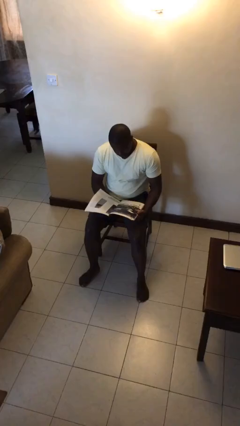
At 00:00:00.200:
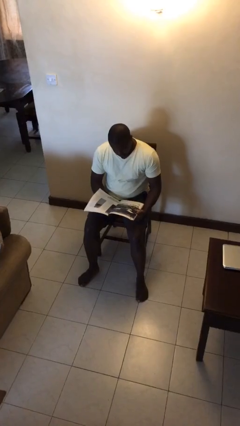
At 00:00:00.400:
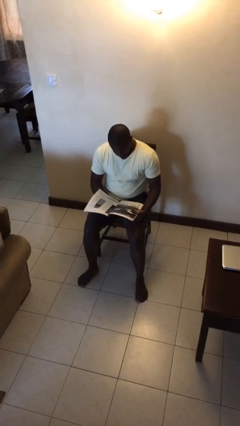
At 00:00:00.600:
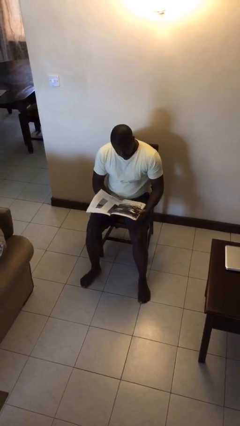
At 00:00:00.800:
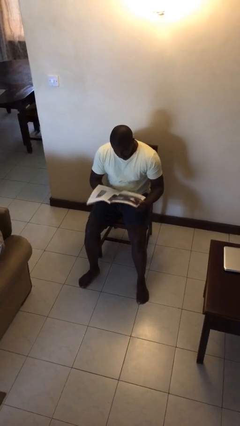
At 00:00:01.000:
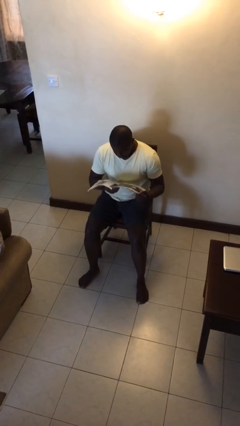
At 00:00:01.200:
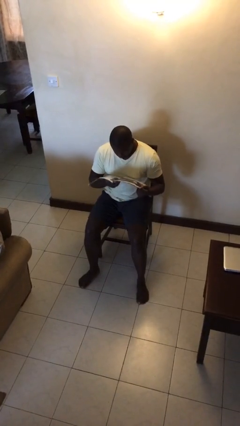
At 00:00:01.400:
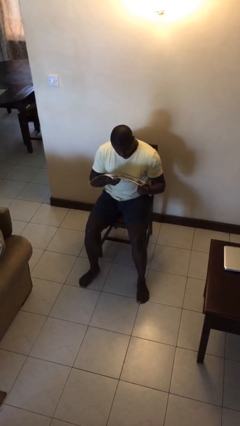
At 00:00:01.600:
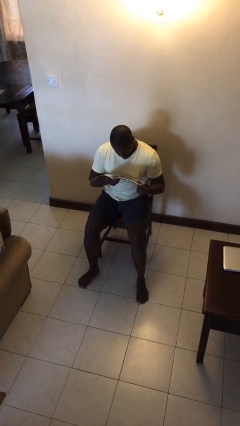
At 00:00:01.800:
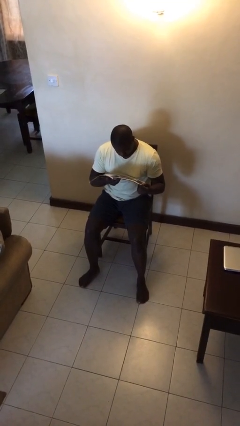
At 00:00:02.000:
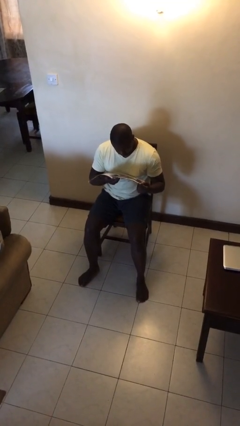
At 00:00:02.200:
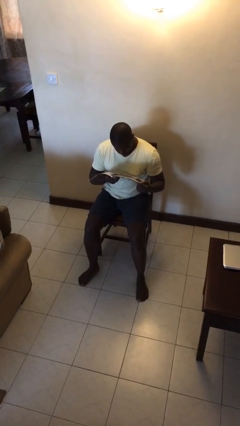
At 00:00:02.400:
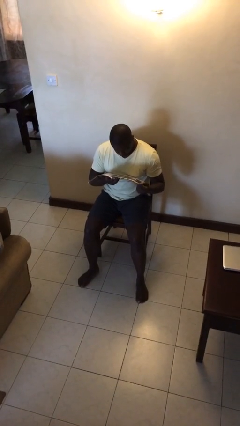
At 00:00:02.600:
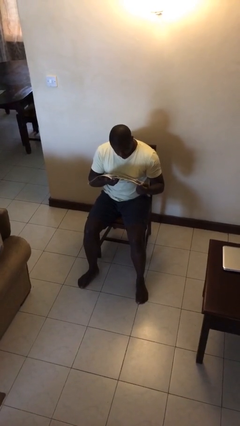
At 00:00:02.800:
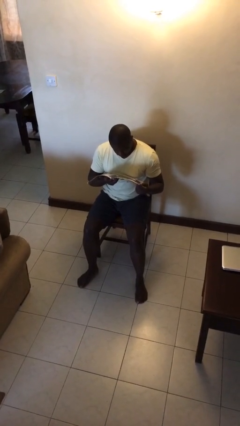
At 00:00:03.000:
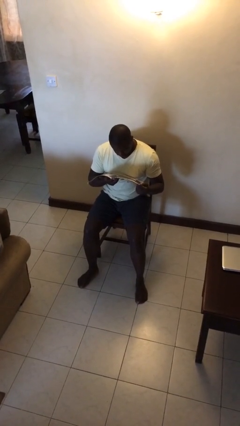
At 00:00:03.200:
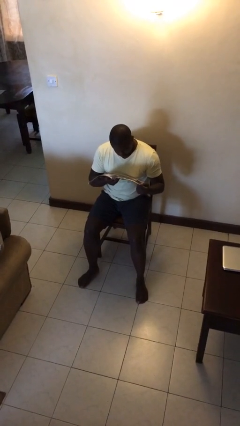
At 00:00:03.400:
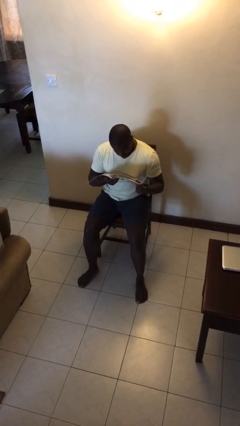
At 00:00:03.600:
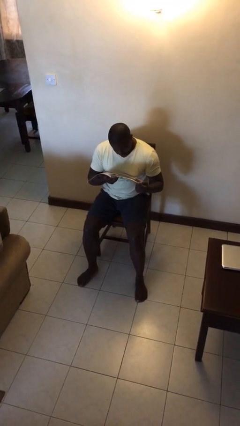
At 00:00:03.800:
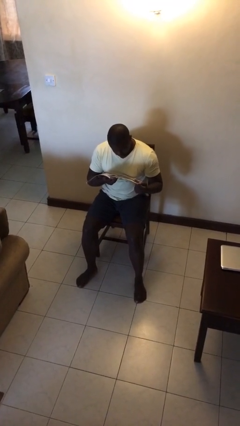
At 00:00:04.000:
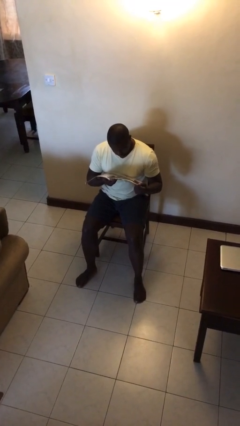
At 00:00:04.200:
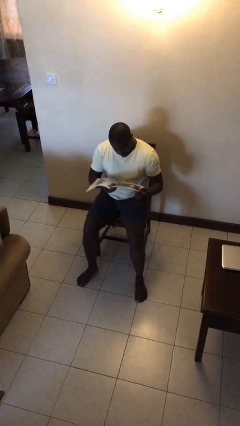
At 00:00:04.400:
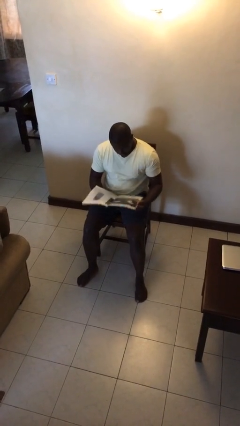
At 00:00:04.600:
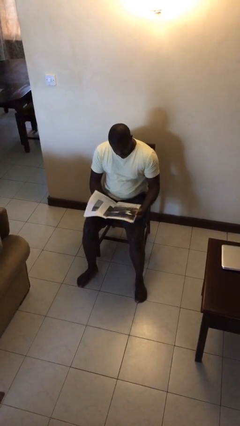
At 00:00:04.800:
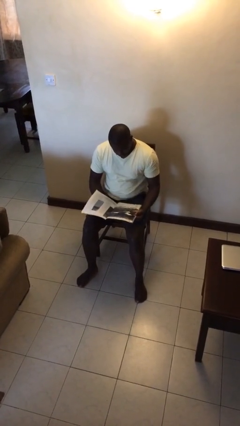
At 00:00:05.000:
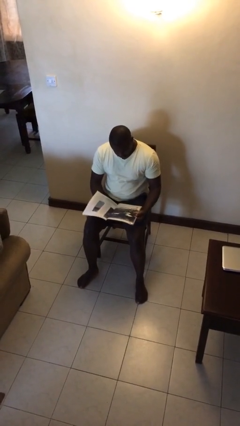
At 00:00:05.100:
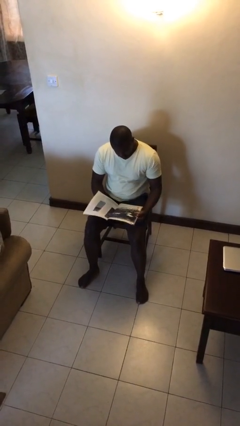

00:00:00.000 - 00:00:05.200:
person reads document

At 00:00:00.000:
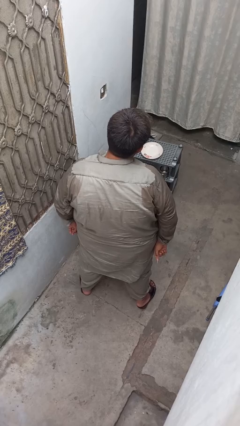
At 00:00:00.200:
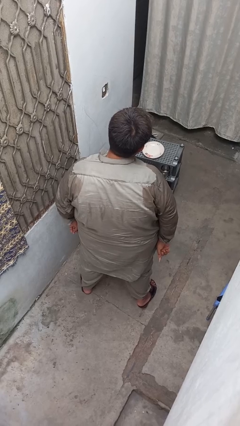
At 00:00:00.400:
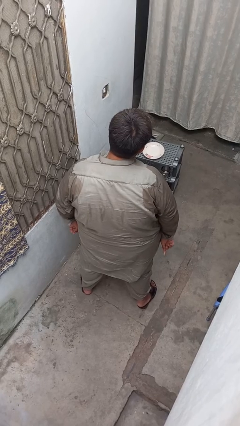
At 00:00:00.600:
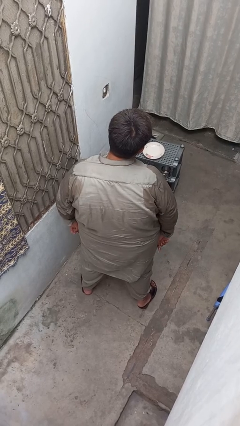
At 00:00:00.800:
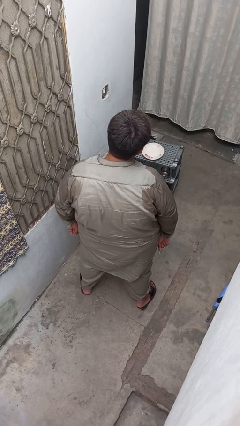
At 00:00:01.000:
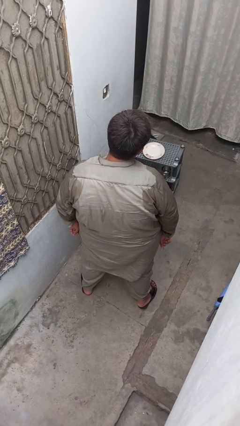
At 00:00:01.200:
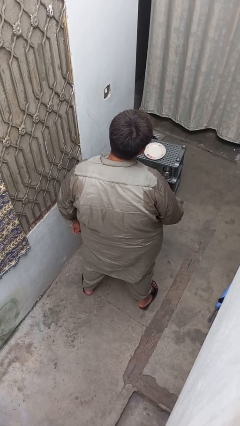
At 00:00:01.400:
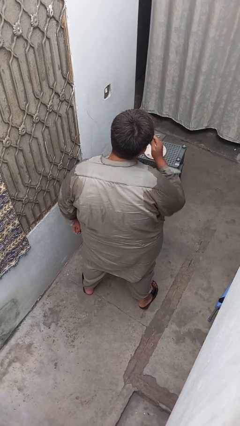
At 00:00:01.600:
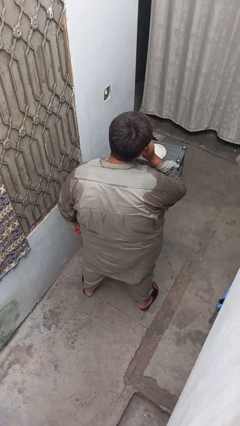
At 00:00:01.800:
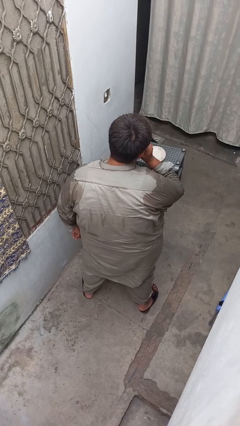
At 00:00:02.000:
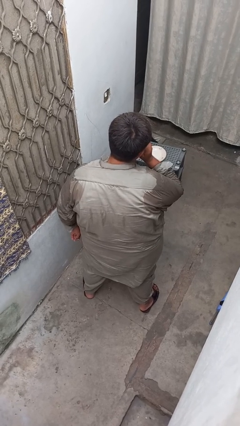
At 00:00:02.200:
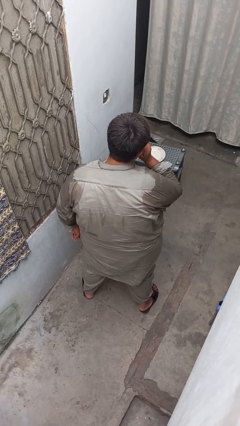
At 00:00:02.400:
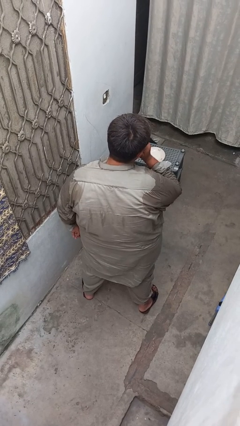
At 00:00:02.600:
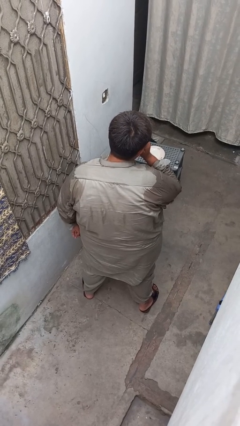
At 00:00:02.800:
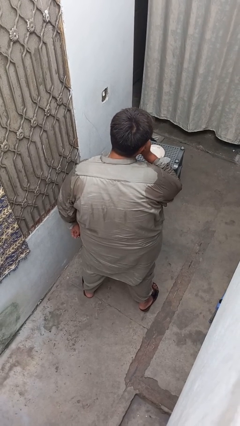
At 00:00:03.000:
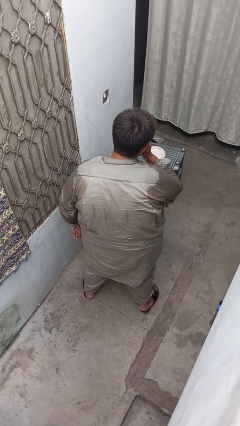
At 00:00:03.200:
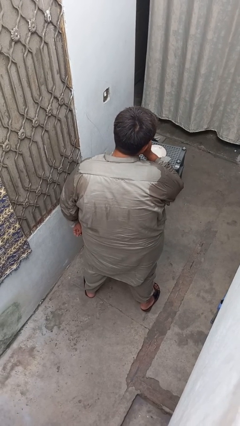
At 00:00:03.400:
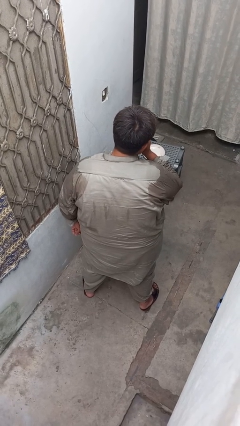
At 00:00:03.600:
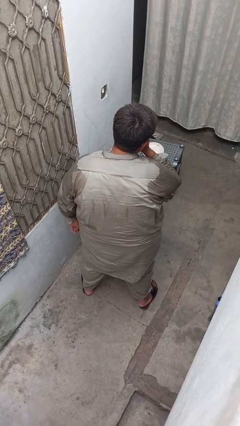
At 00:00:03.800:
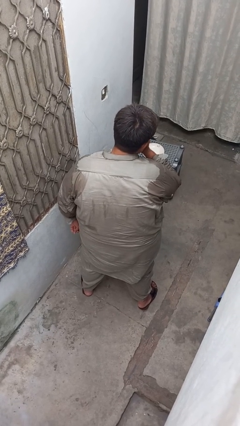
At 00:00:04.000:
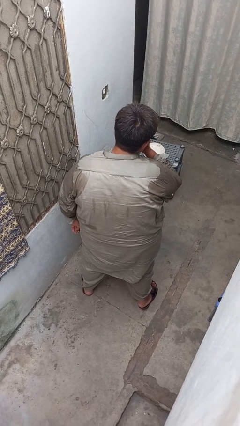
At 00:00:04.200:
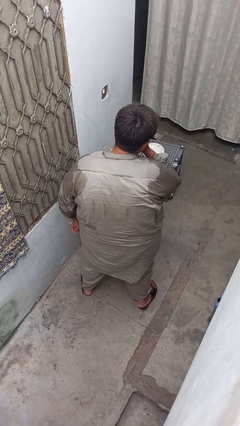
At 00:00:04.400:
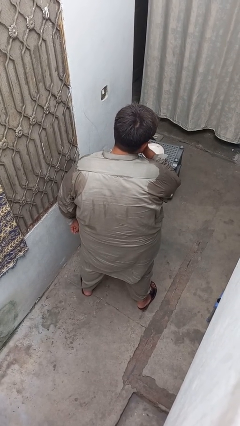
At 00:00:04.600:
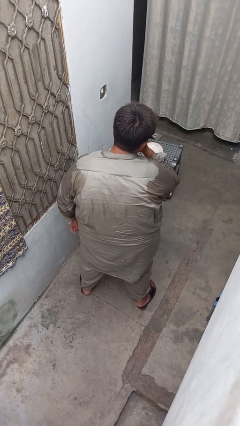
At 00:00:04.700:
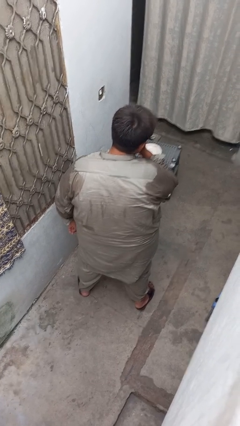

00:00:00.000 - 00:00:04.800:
person flosses

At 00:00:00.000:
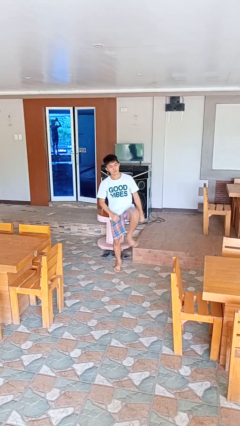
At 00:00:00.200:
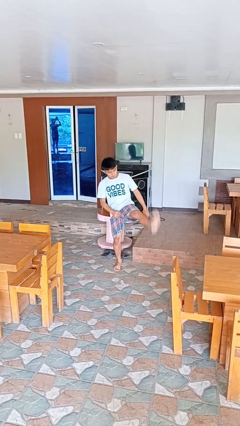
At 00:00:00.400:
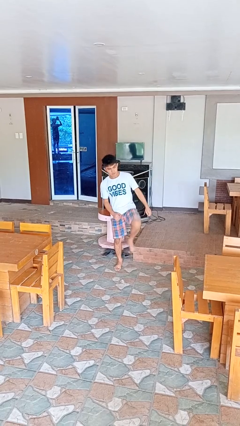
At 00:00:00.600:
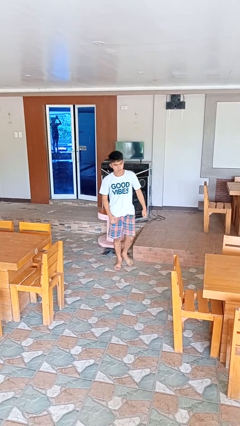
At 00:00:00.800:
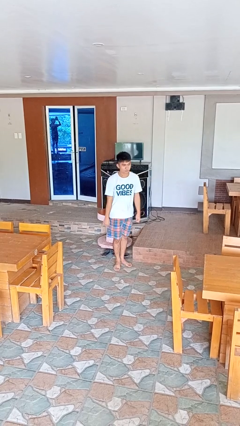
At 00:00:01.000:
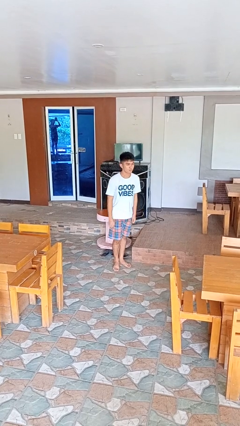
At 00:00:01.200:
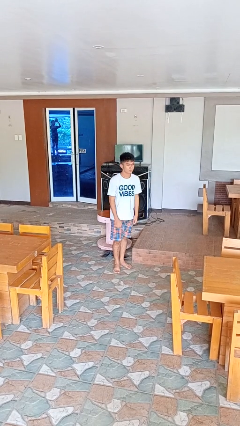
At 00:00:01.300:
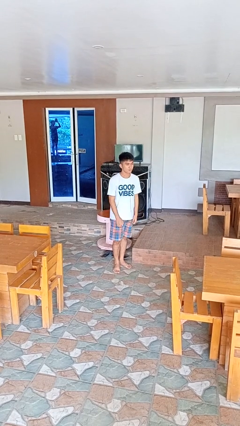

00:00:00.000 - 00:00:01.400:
person karate kicks

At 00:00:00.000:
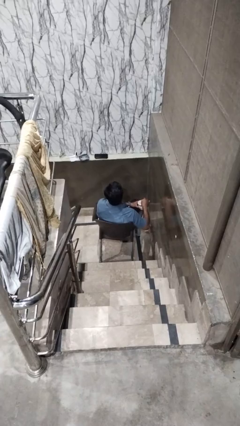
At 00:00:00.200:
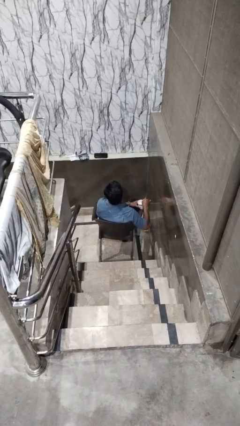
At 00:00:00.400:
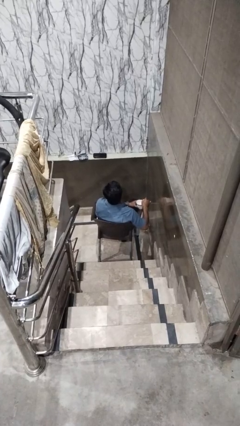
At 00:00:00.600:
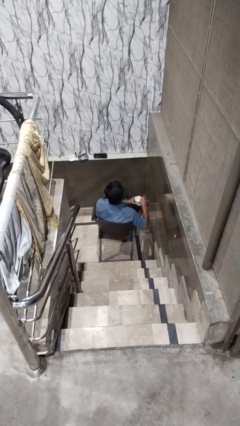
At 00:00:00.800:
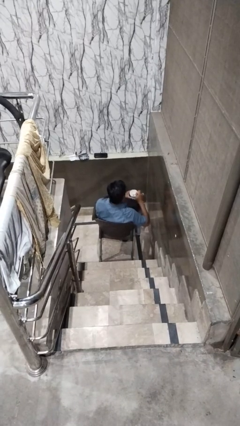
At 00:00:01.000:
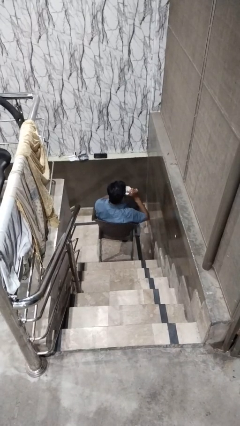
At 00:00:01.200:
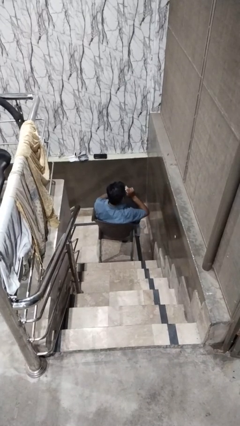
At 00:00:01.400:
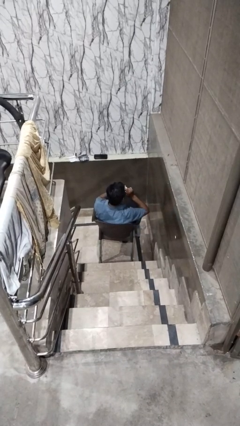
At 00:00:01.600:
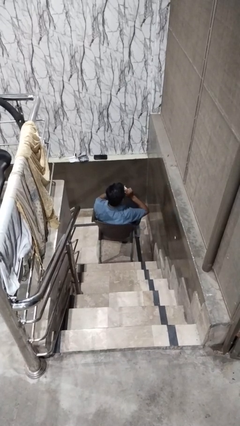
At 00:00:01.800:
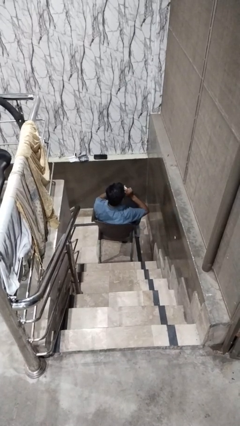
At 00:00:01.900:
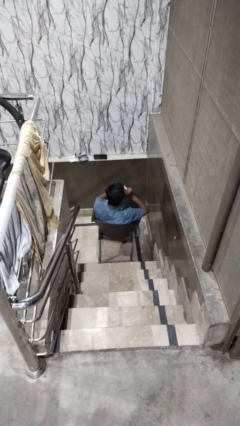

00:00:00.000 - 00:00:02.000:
person drinks from mug

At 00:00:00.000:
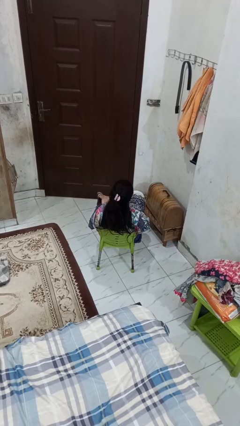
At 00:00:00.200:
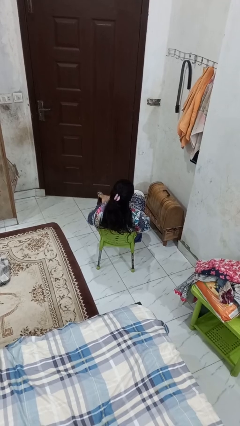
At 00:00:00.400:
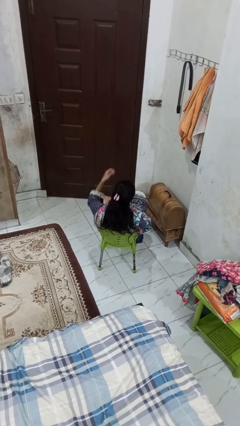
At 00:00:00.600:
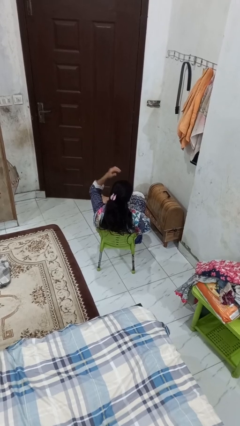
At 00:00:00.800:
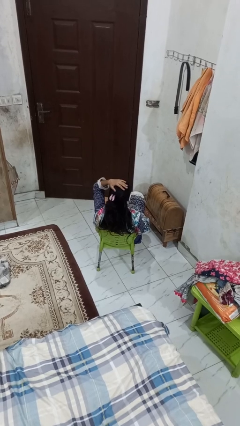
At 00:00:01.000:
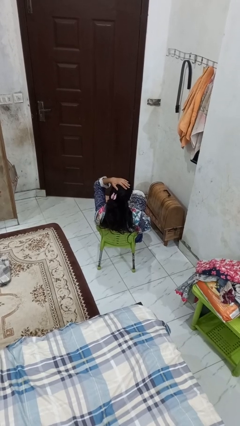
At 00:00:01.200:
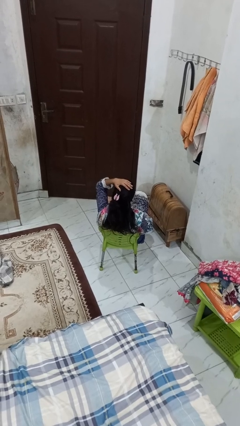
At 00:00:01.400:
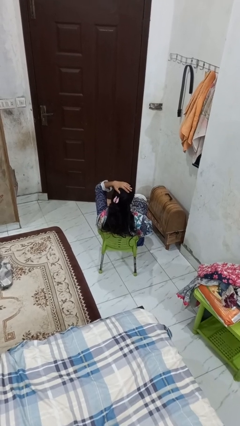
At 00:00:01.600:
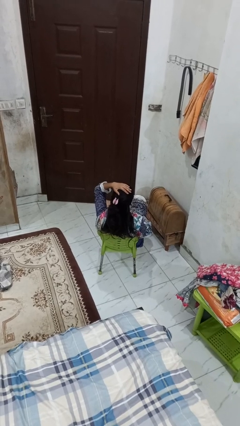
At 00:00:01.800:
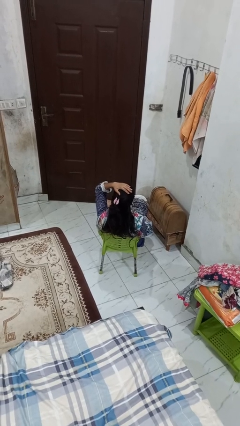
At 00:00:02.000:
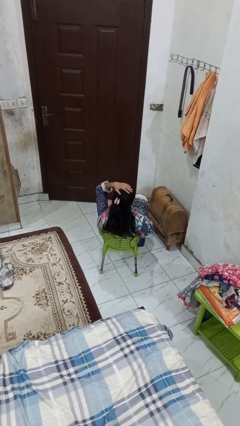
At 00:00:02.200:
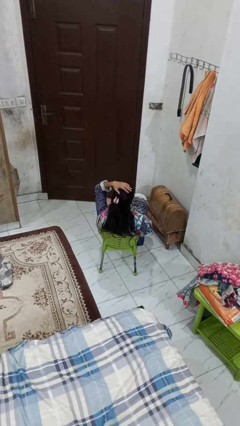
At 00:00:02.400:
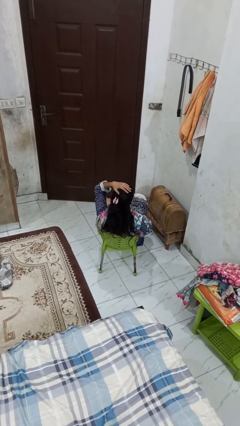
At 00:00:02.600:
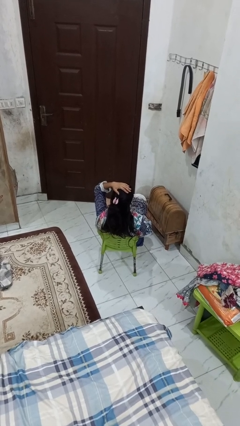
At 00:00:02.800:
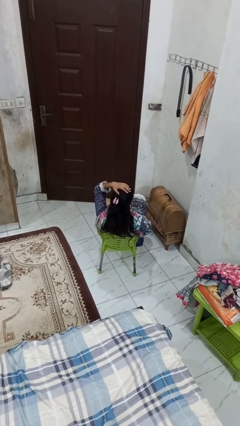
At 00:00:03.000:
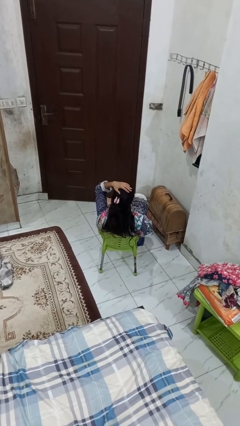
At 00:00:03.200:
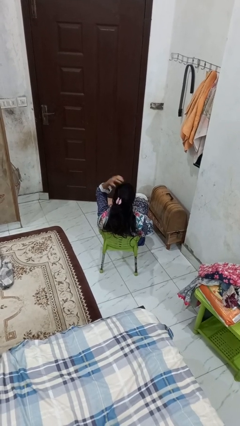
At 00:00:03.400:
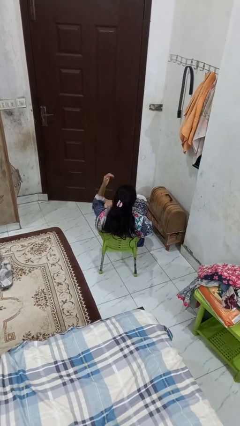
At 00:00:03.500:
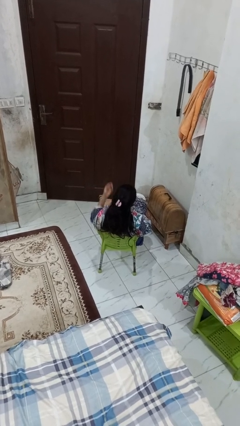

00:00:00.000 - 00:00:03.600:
person pats head
